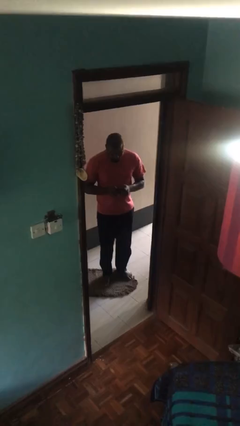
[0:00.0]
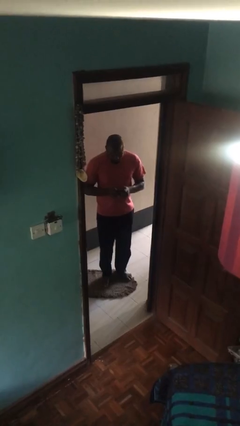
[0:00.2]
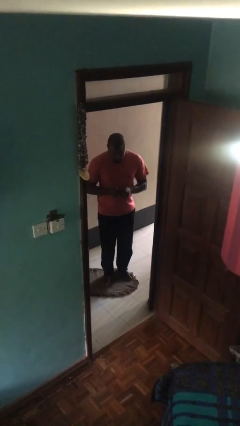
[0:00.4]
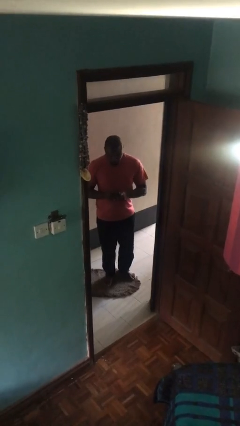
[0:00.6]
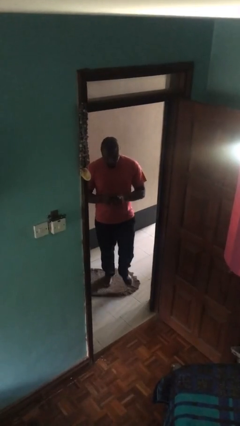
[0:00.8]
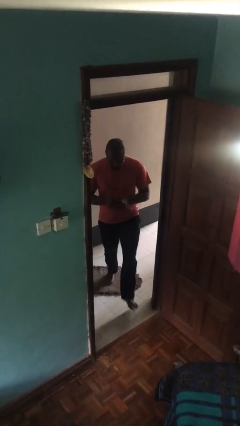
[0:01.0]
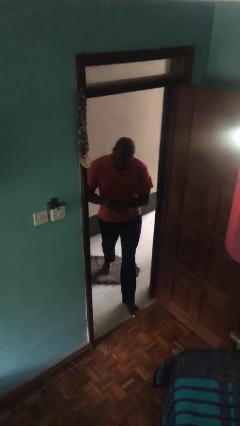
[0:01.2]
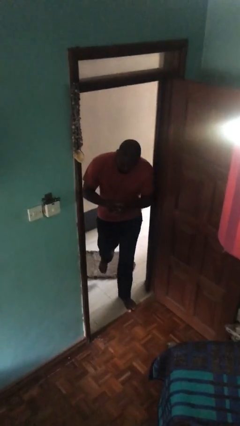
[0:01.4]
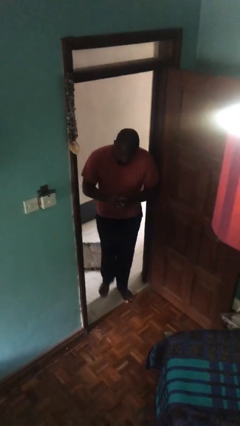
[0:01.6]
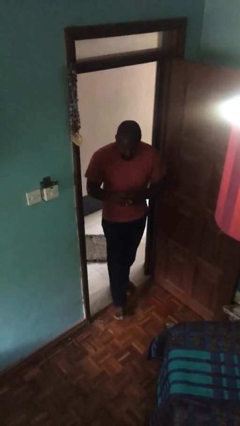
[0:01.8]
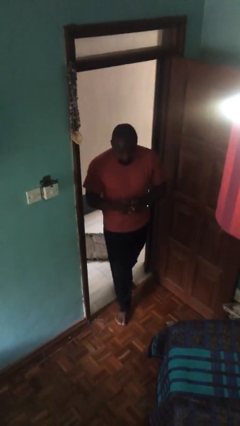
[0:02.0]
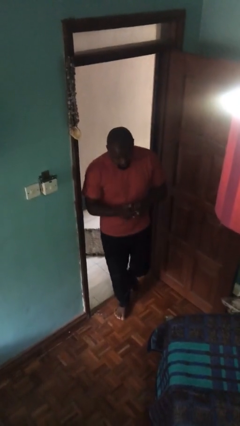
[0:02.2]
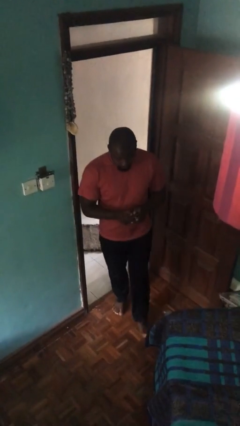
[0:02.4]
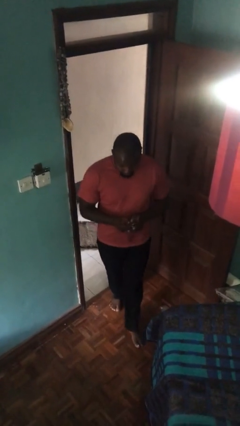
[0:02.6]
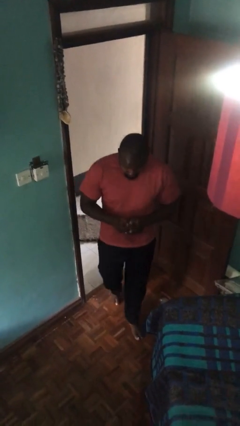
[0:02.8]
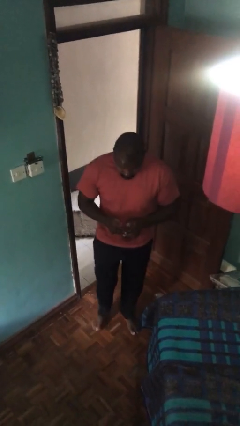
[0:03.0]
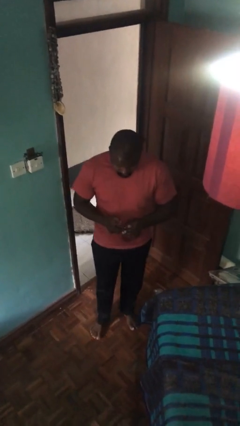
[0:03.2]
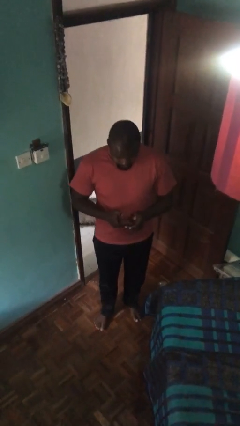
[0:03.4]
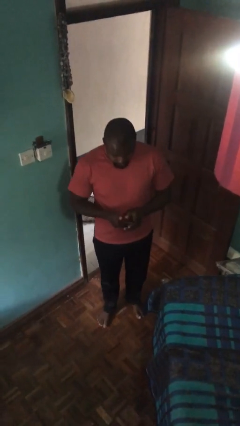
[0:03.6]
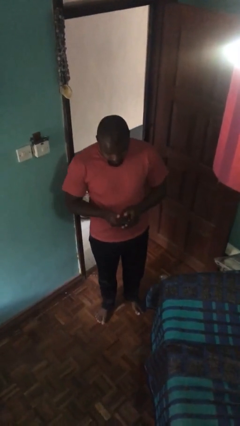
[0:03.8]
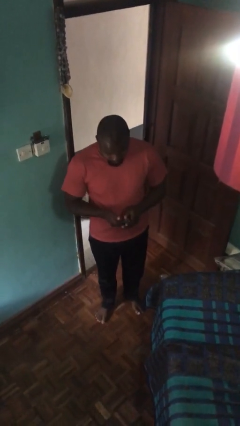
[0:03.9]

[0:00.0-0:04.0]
person enters scene through structure

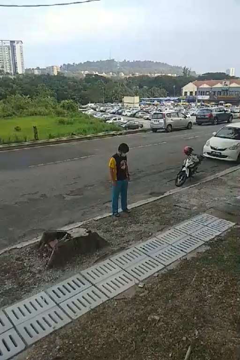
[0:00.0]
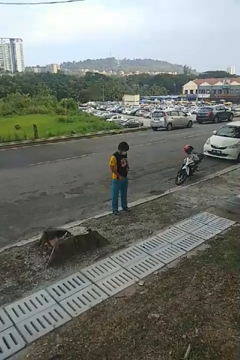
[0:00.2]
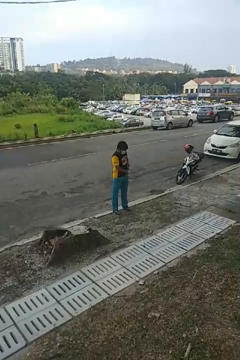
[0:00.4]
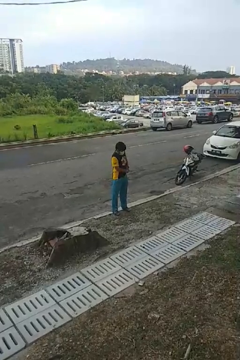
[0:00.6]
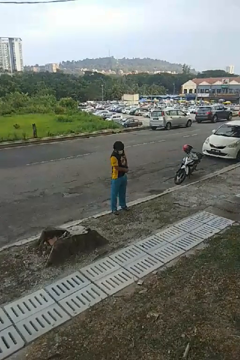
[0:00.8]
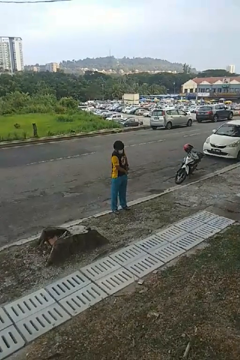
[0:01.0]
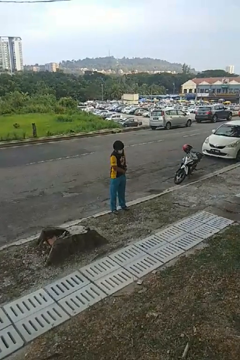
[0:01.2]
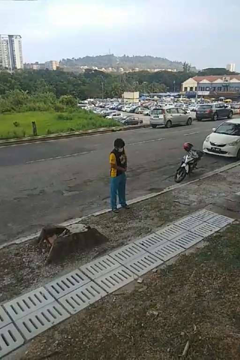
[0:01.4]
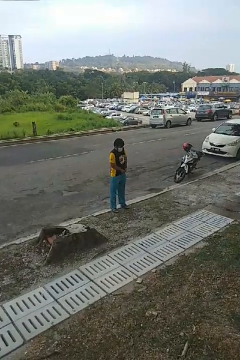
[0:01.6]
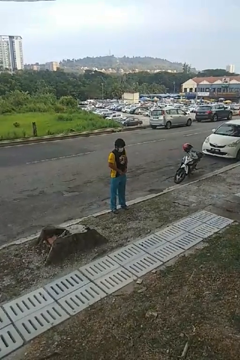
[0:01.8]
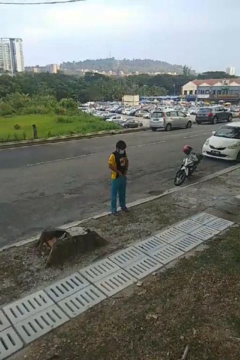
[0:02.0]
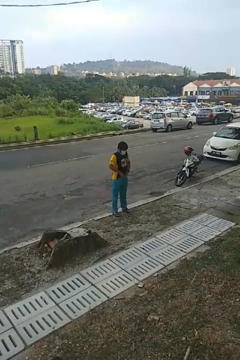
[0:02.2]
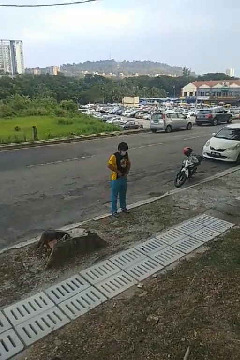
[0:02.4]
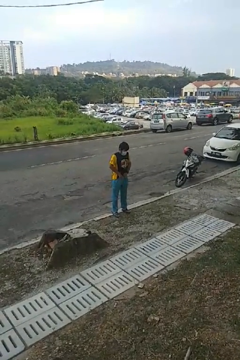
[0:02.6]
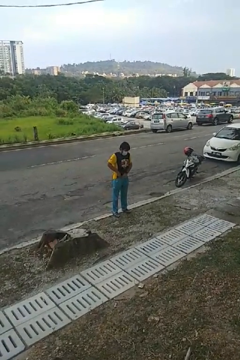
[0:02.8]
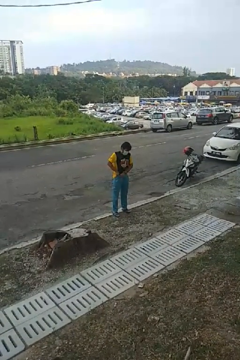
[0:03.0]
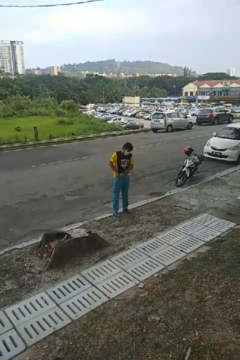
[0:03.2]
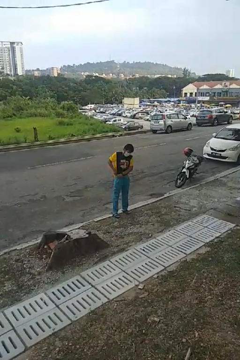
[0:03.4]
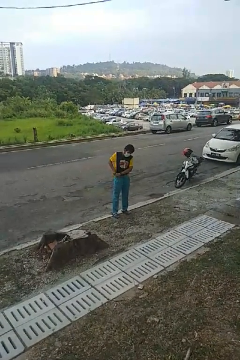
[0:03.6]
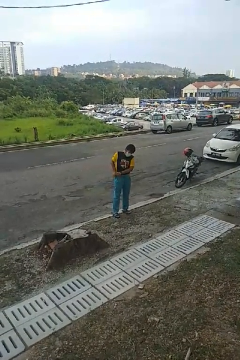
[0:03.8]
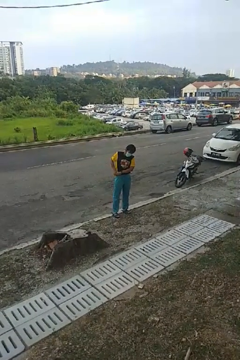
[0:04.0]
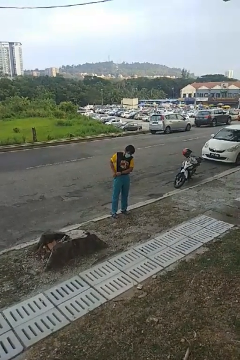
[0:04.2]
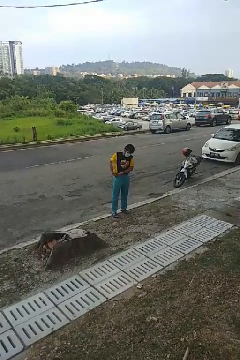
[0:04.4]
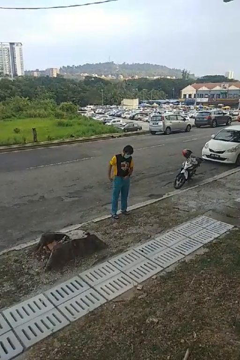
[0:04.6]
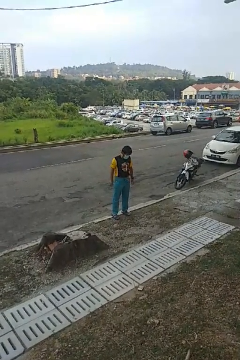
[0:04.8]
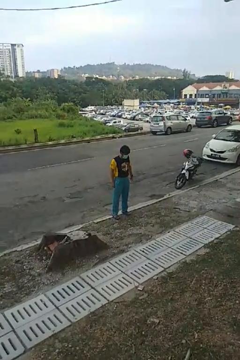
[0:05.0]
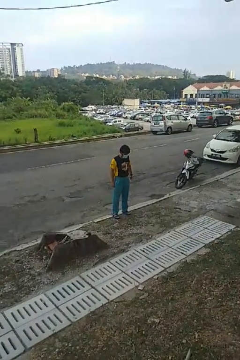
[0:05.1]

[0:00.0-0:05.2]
person tucks in shirt

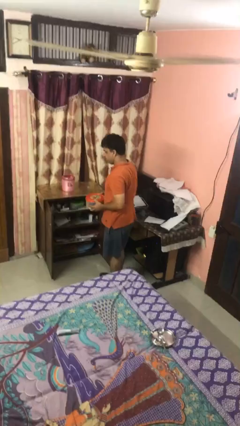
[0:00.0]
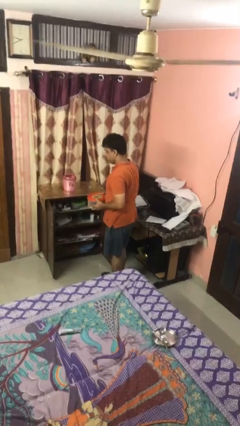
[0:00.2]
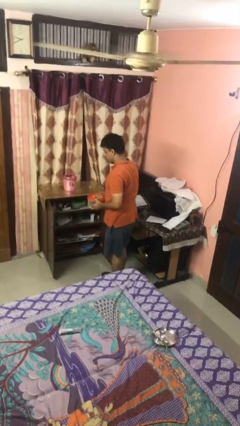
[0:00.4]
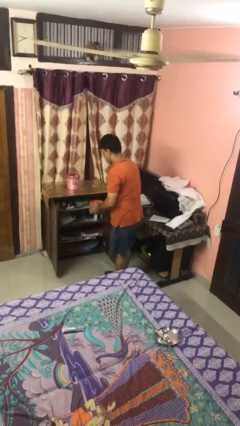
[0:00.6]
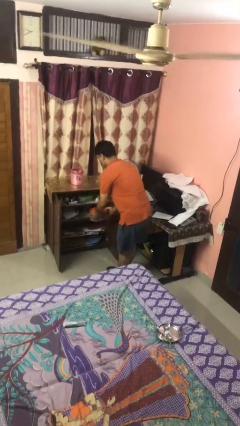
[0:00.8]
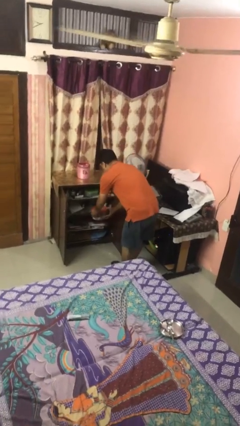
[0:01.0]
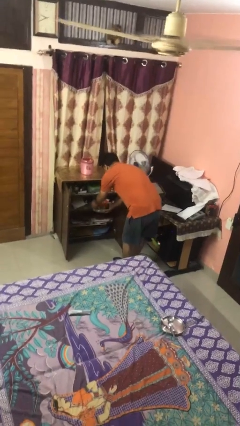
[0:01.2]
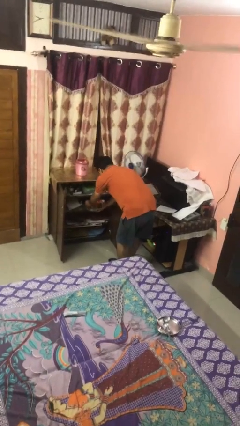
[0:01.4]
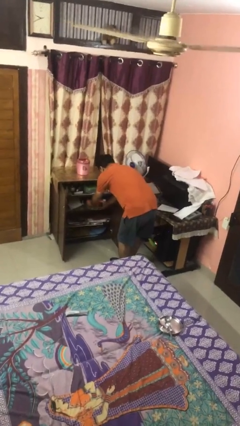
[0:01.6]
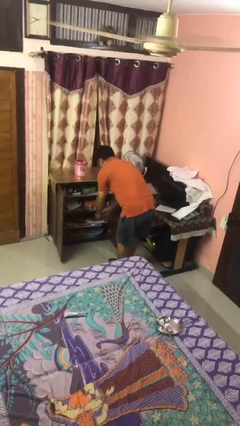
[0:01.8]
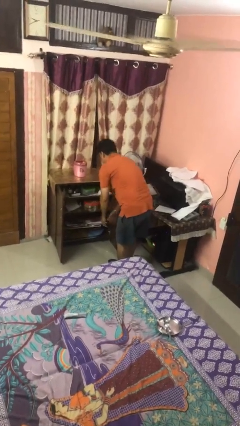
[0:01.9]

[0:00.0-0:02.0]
person puts down object into cabinet

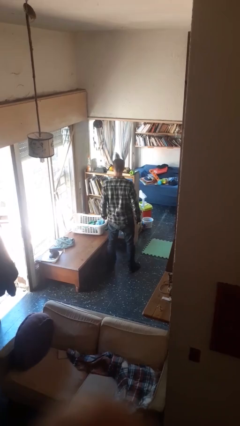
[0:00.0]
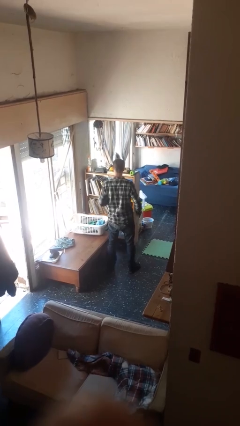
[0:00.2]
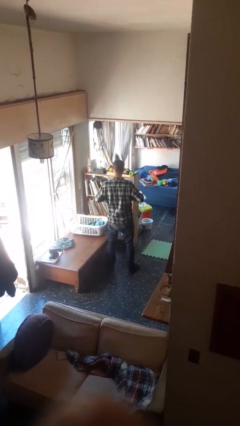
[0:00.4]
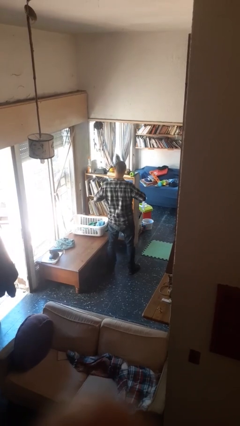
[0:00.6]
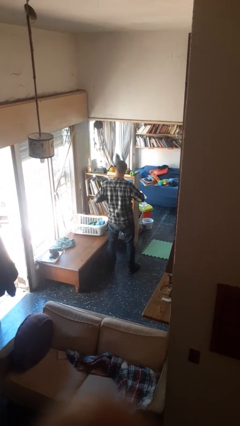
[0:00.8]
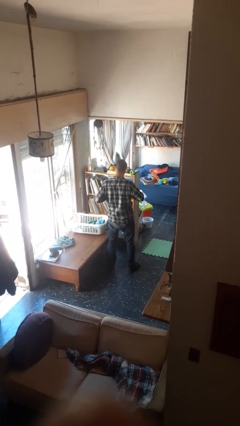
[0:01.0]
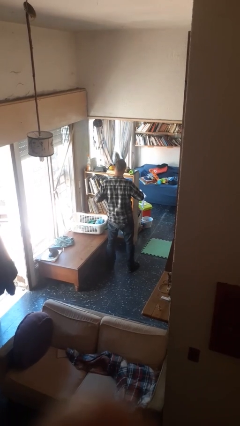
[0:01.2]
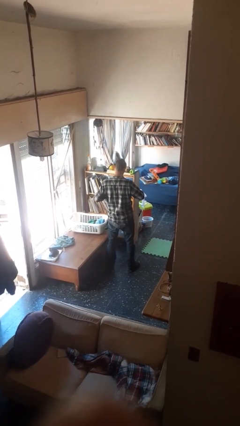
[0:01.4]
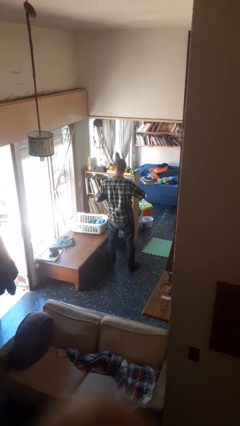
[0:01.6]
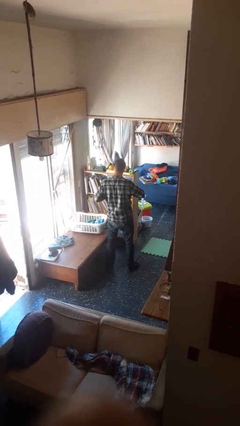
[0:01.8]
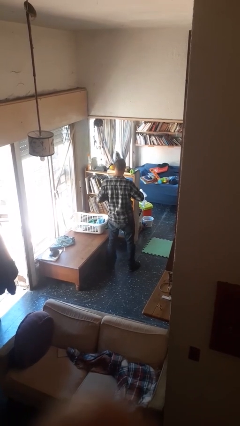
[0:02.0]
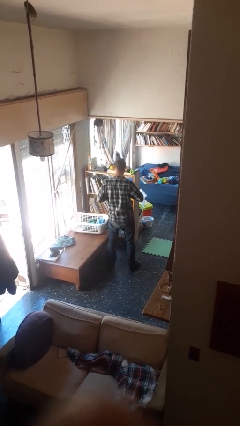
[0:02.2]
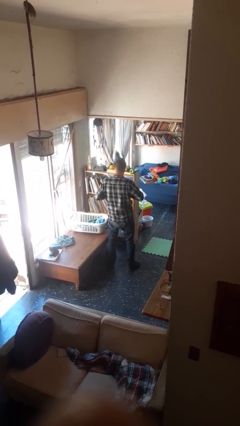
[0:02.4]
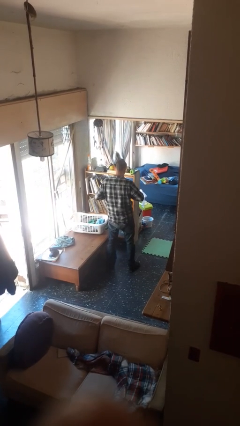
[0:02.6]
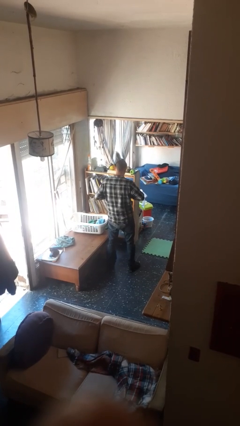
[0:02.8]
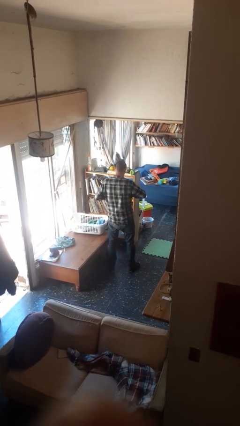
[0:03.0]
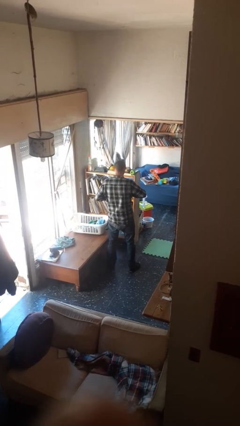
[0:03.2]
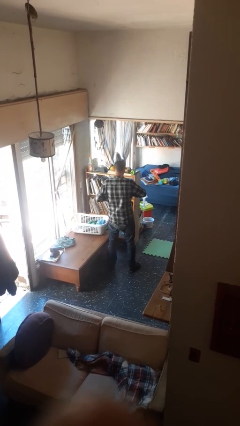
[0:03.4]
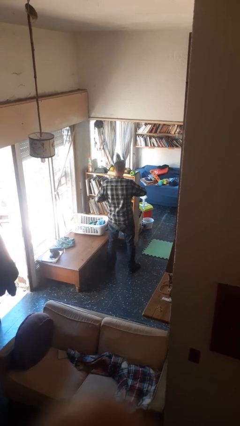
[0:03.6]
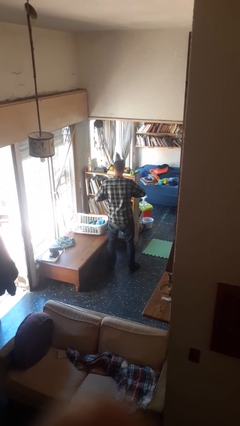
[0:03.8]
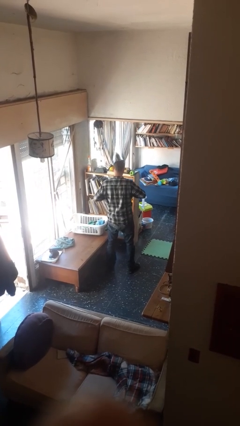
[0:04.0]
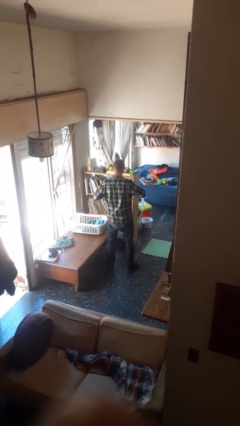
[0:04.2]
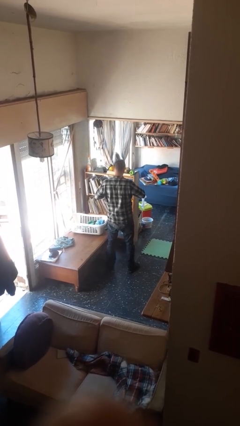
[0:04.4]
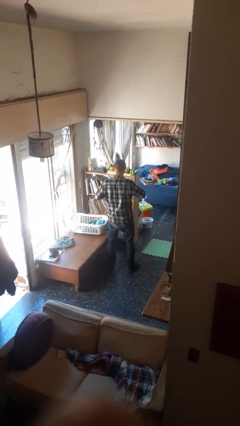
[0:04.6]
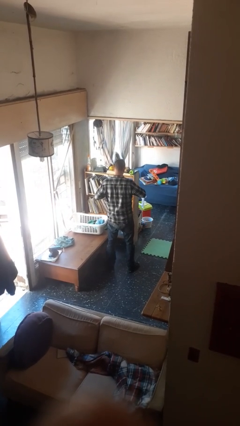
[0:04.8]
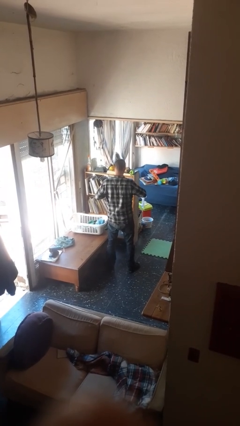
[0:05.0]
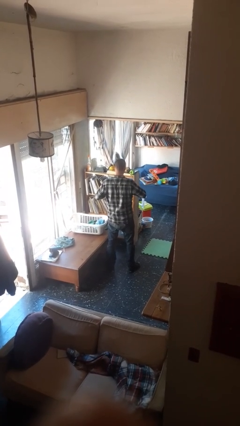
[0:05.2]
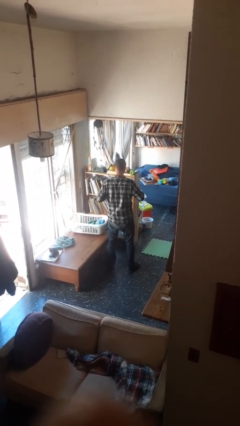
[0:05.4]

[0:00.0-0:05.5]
person buttons shirt

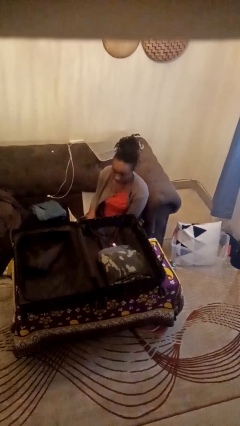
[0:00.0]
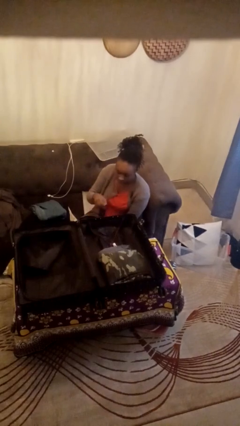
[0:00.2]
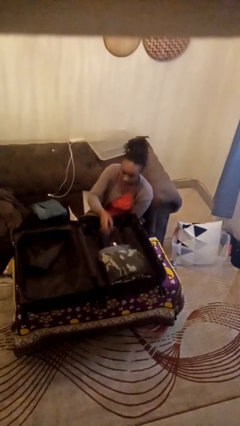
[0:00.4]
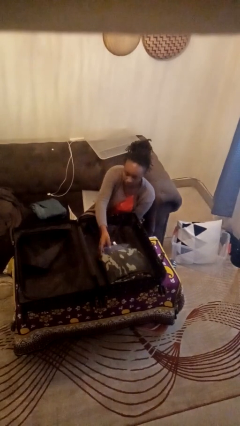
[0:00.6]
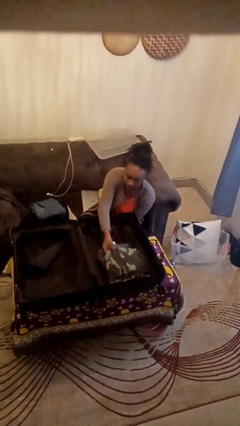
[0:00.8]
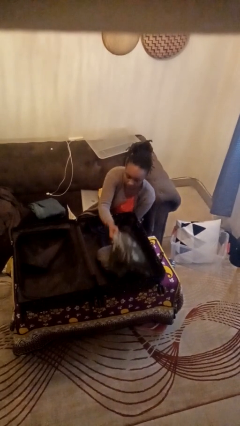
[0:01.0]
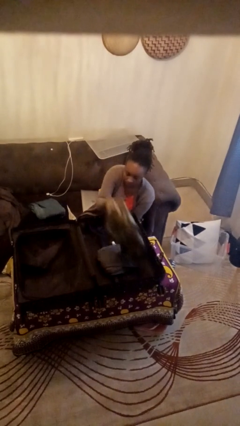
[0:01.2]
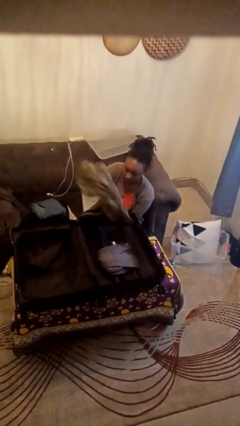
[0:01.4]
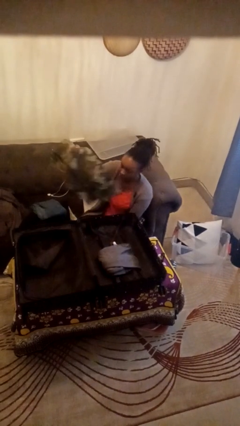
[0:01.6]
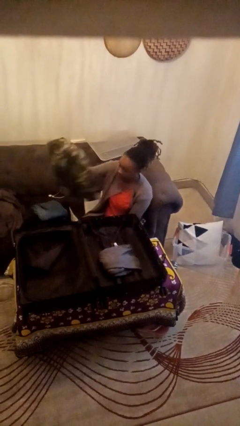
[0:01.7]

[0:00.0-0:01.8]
person unloads clothes from suitcase
